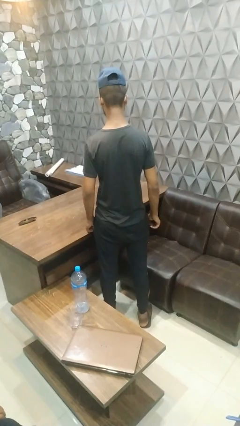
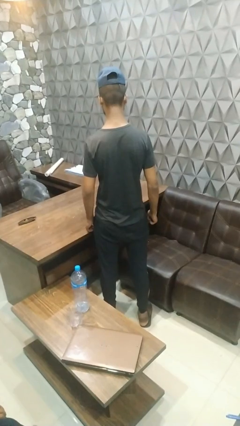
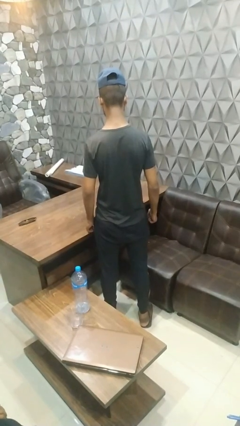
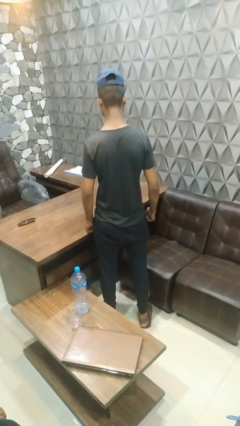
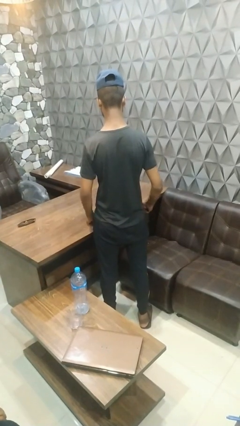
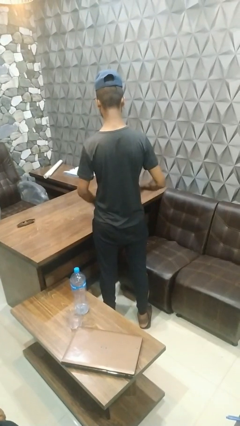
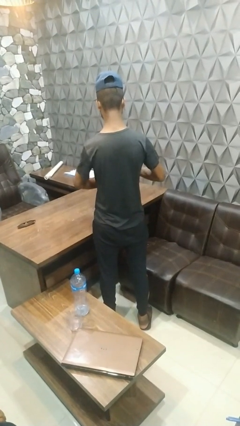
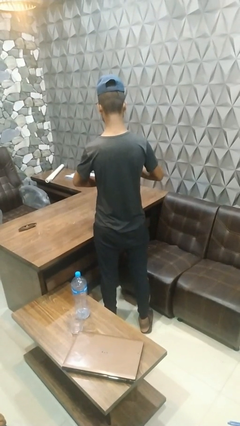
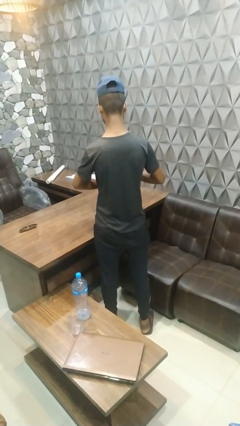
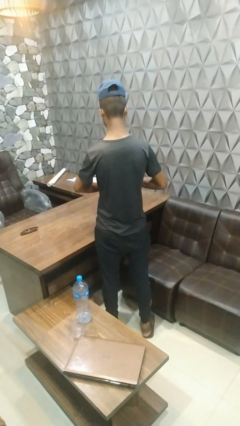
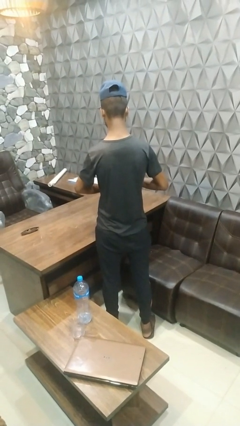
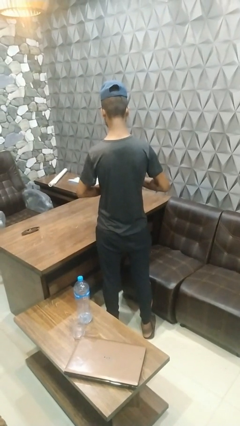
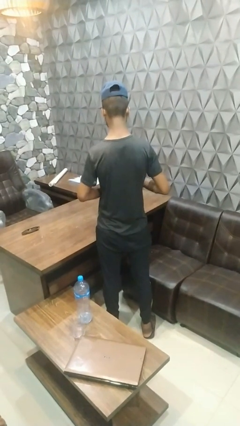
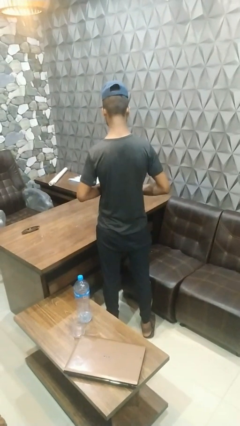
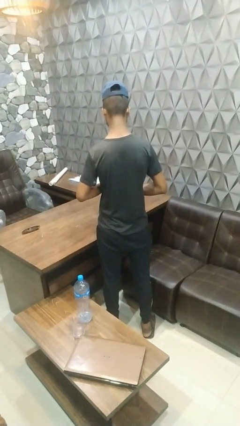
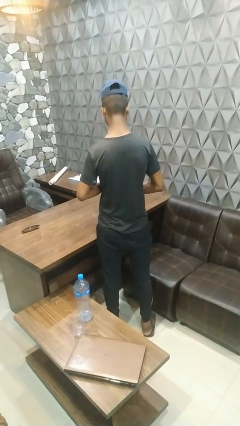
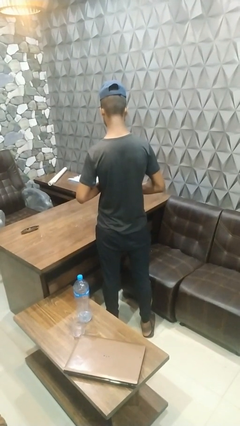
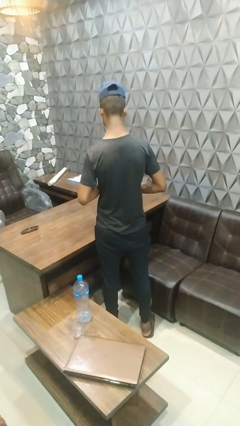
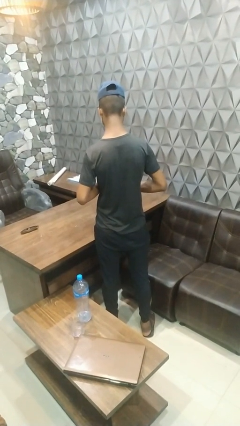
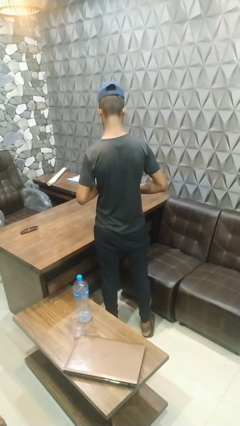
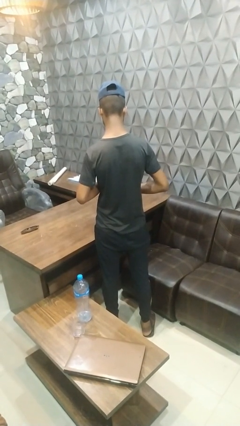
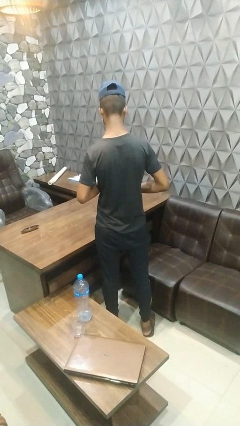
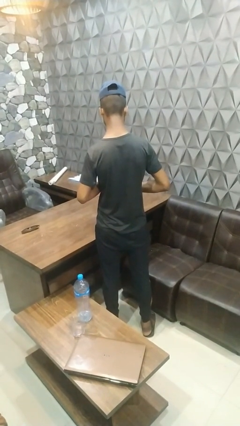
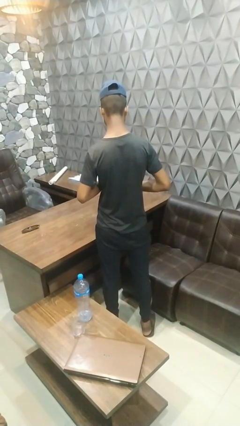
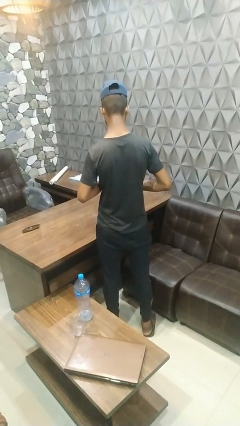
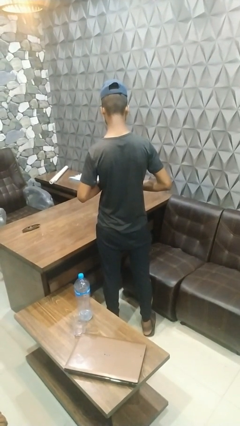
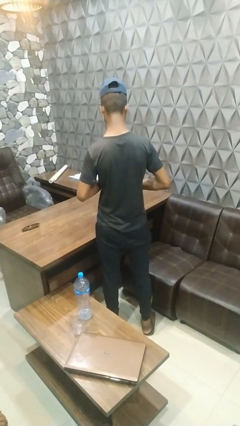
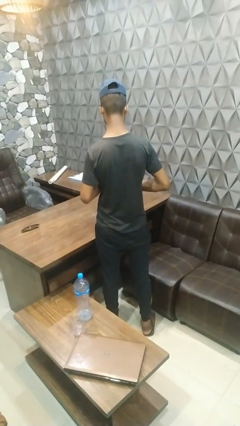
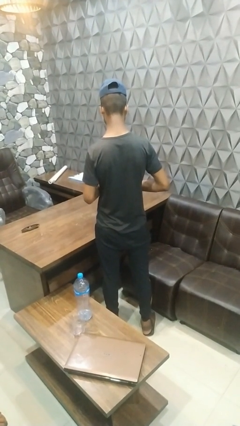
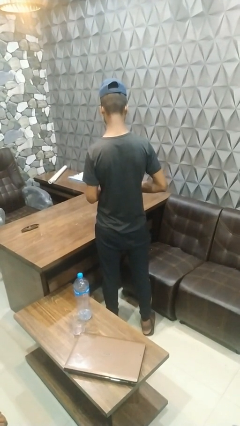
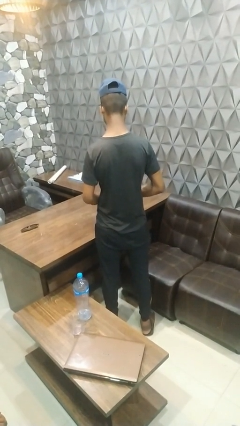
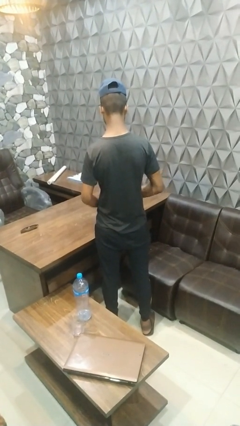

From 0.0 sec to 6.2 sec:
person puts on wristwatch

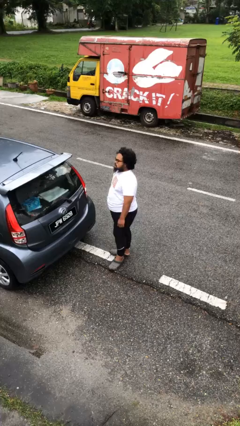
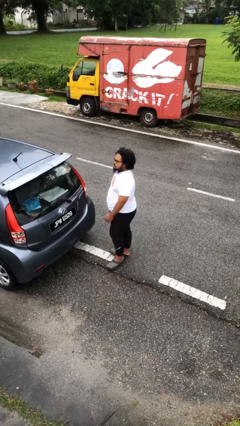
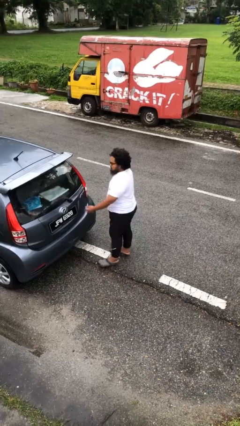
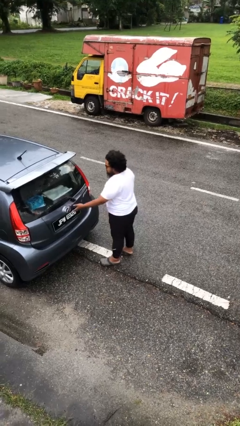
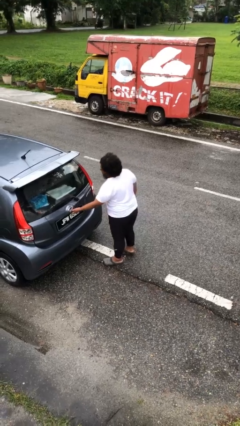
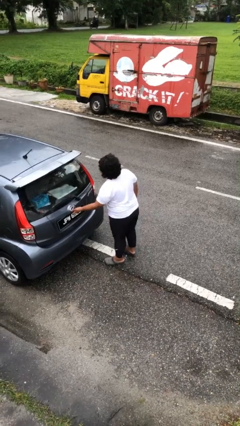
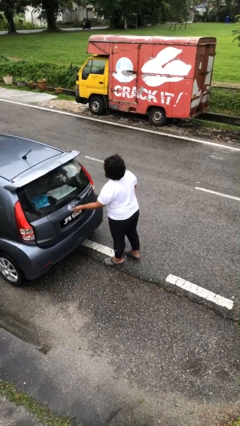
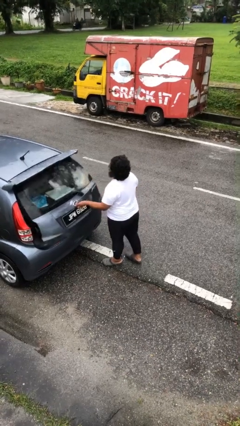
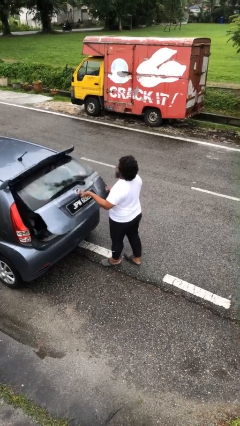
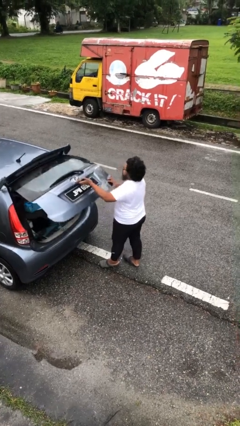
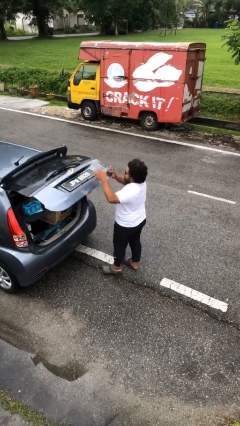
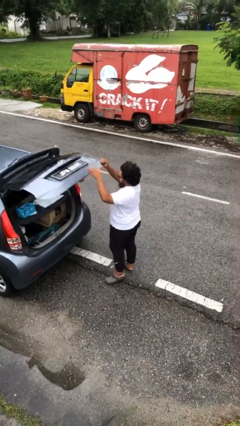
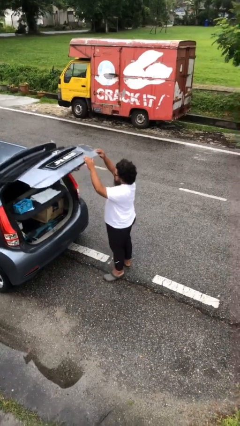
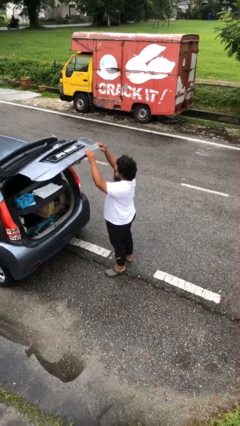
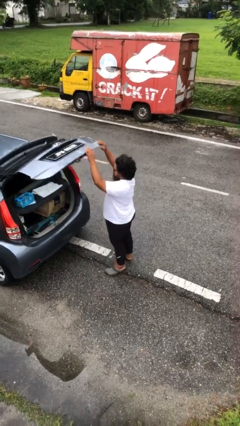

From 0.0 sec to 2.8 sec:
person opens car trunk

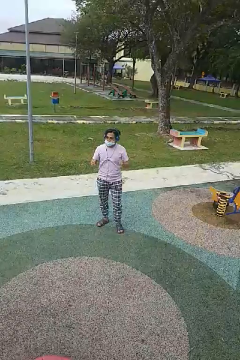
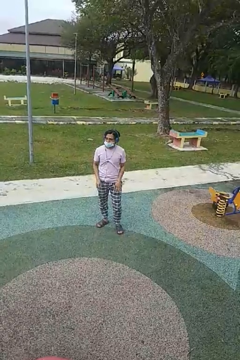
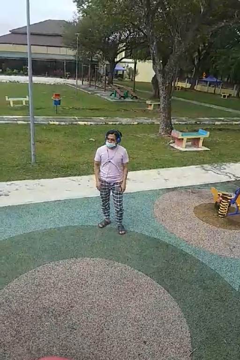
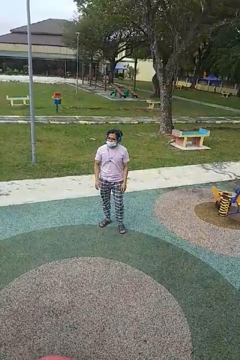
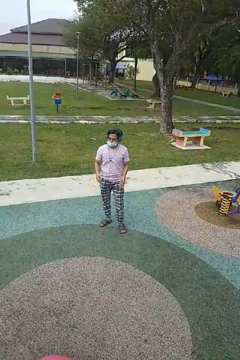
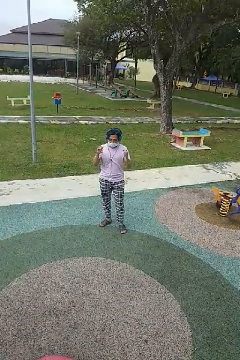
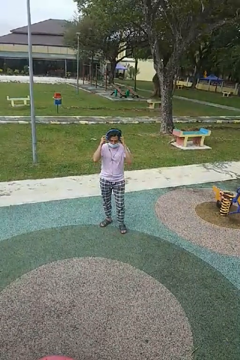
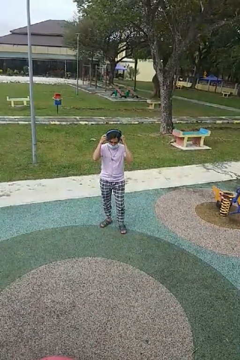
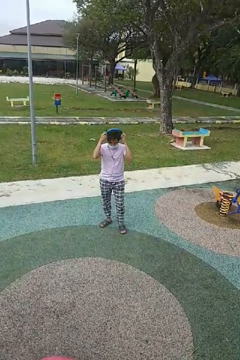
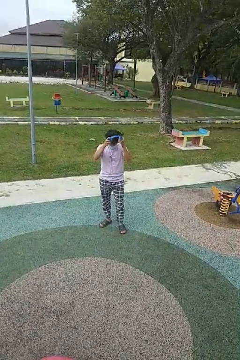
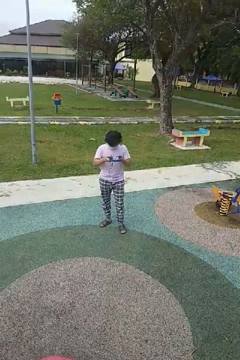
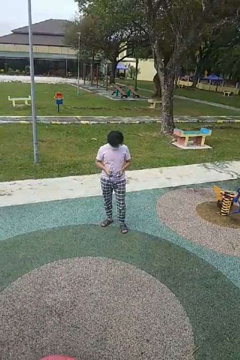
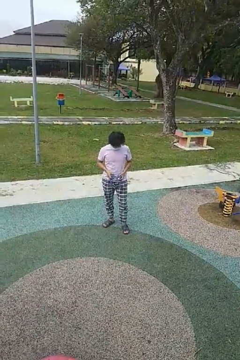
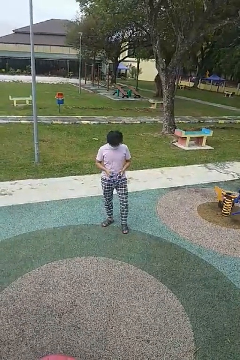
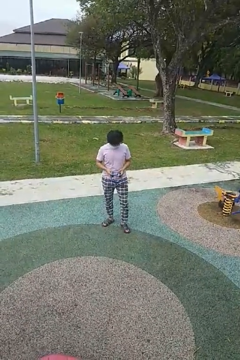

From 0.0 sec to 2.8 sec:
person takes off headphones

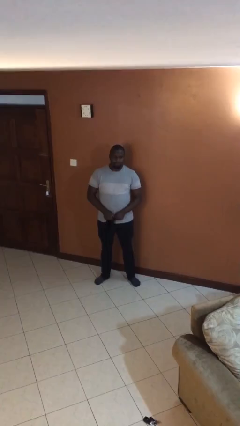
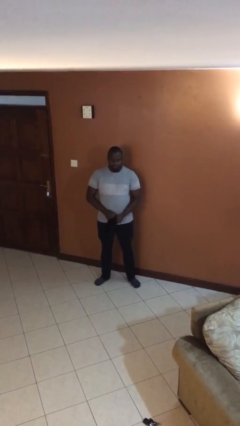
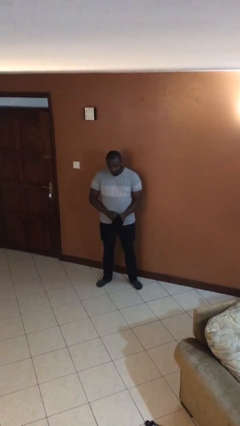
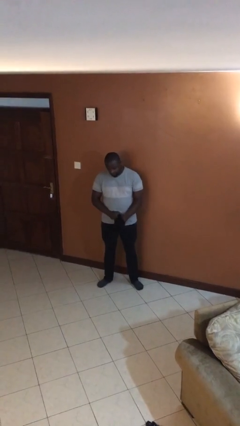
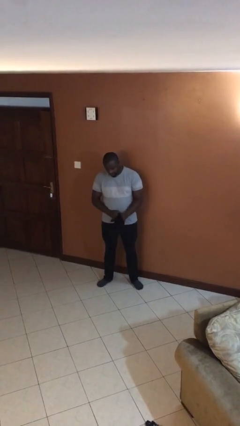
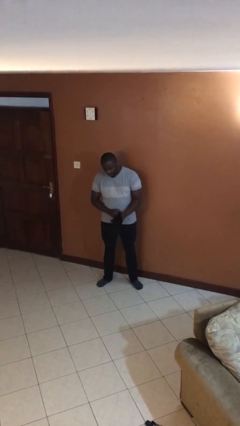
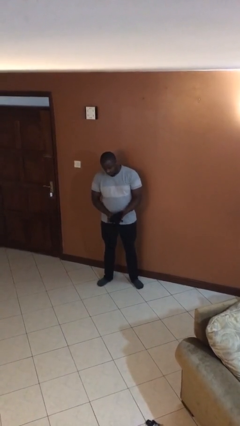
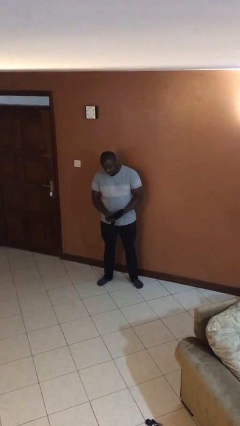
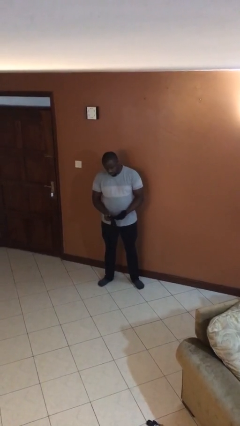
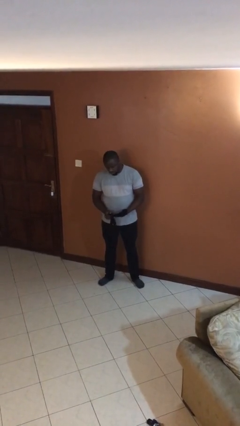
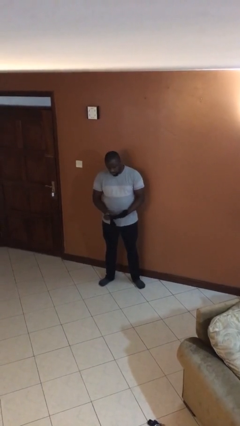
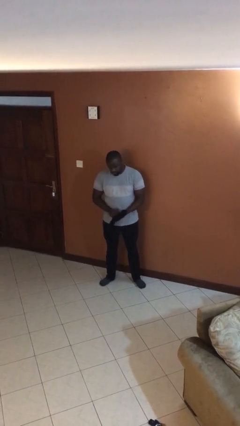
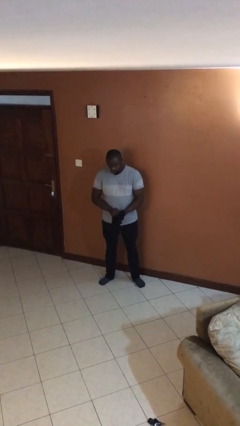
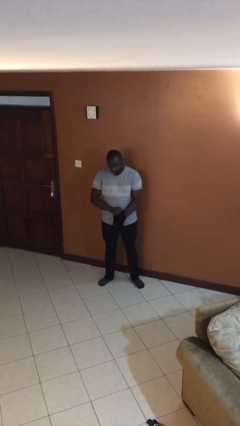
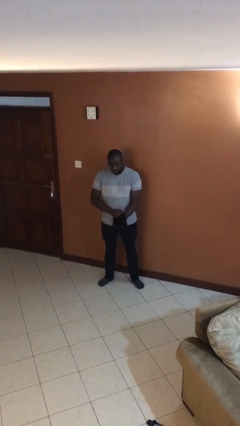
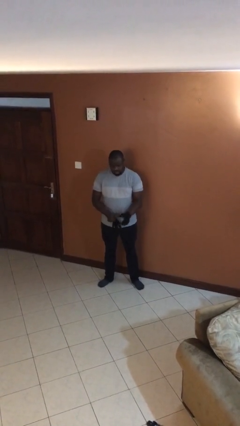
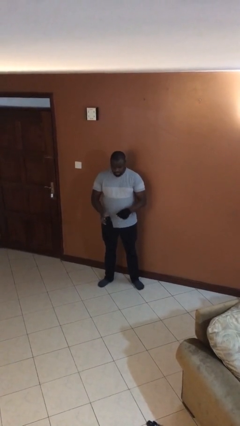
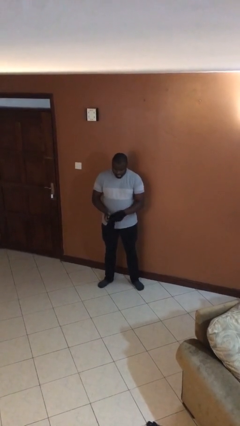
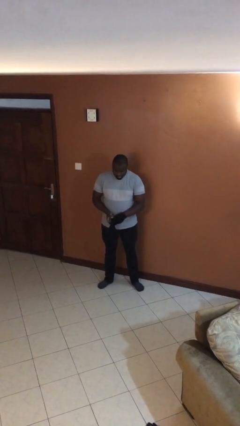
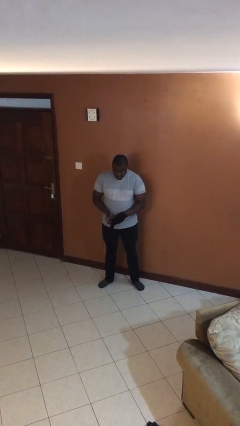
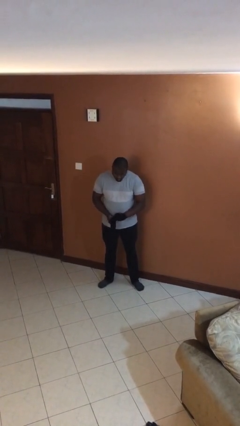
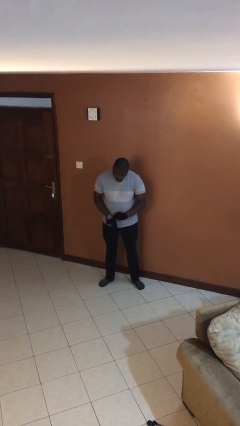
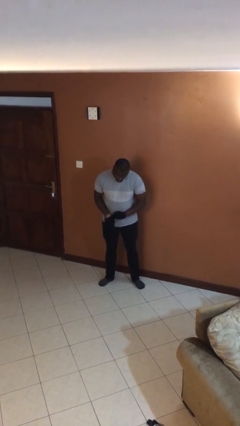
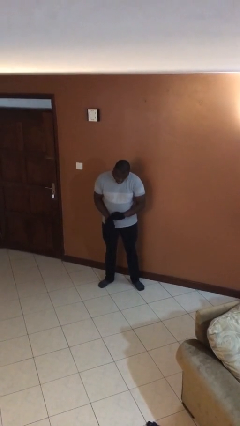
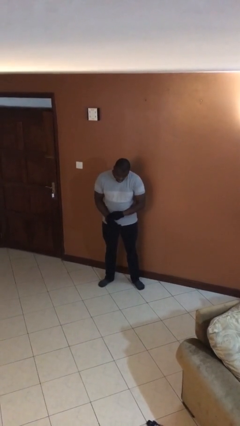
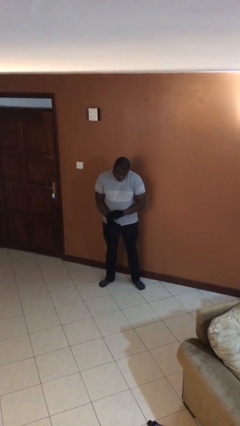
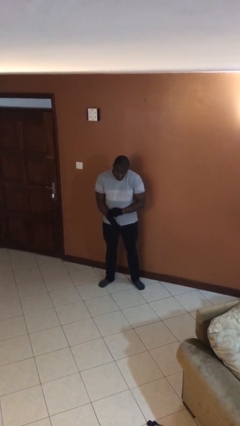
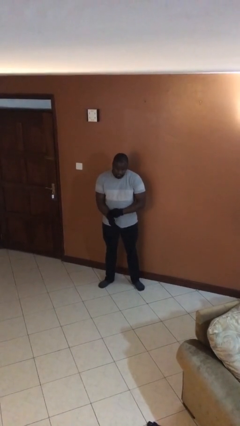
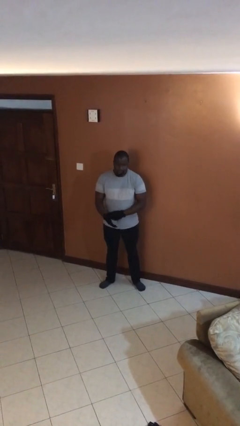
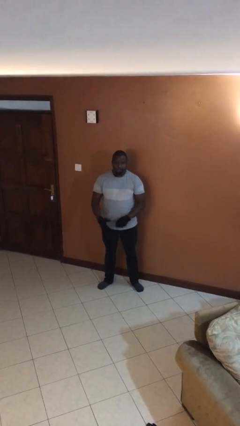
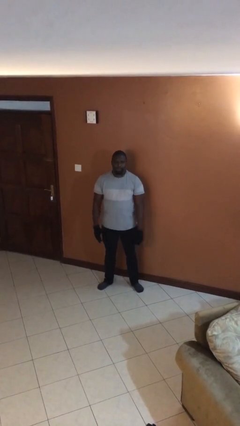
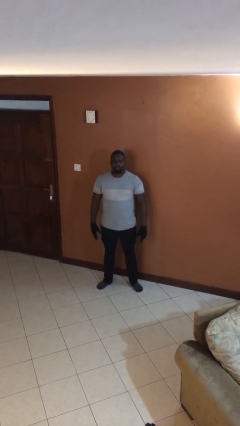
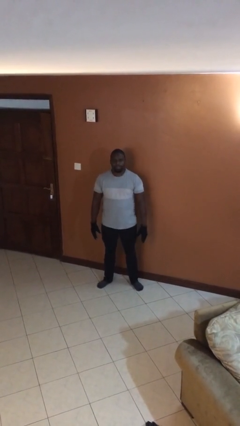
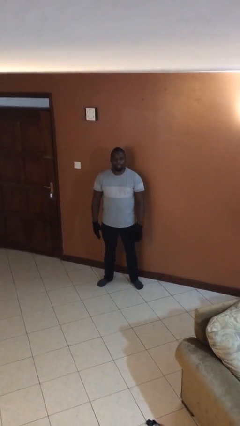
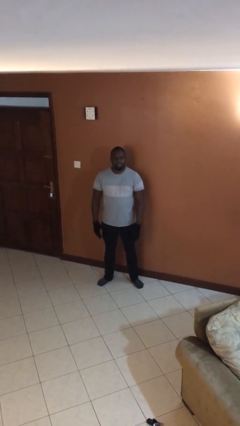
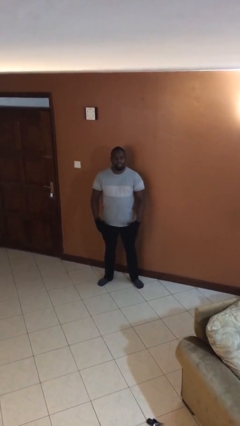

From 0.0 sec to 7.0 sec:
person puts on gloves
